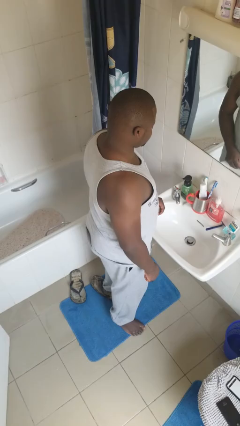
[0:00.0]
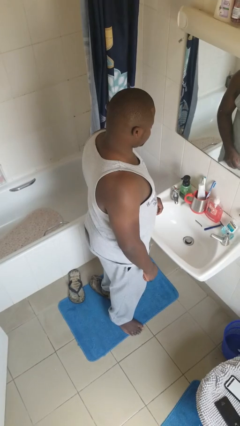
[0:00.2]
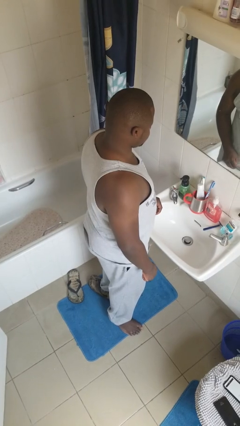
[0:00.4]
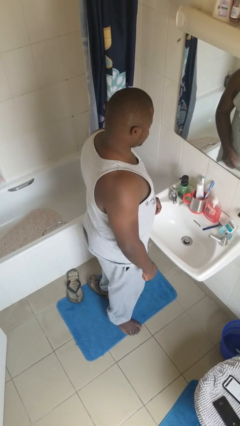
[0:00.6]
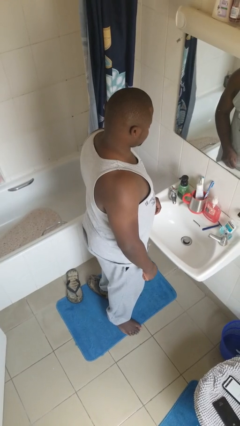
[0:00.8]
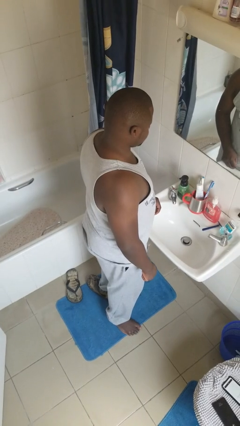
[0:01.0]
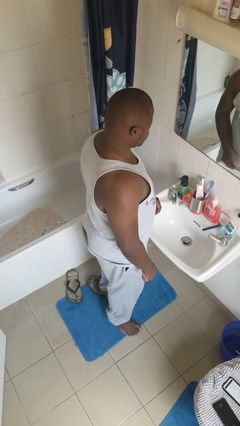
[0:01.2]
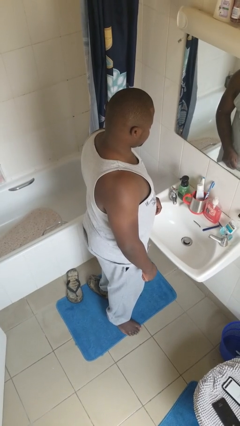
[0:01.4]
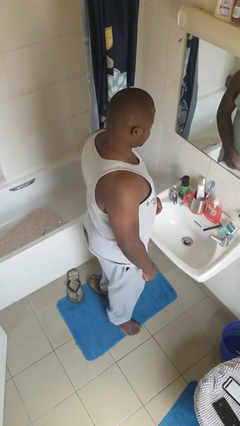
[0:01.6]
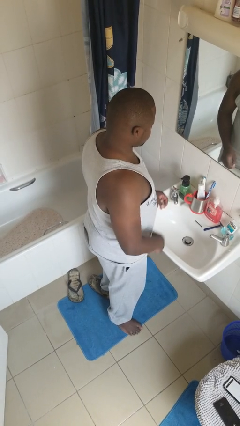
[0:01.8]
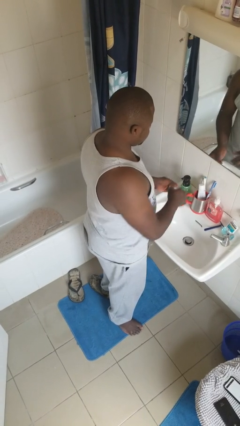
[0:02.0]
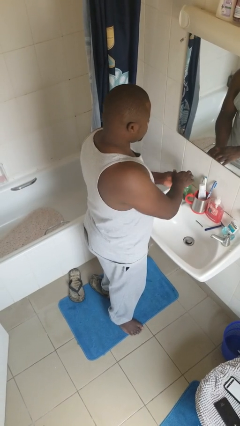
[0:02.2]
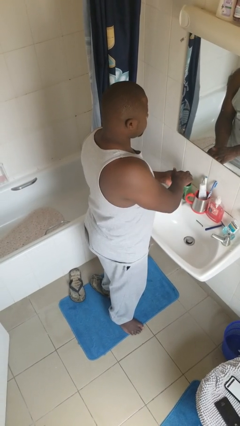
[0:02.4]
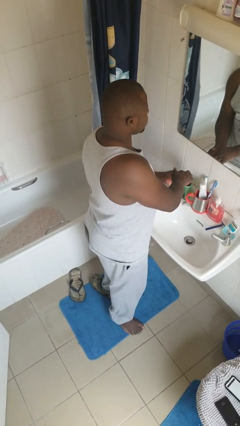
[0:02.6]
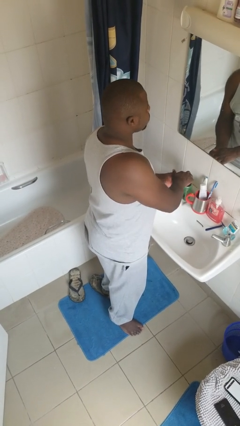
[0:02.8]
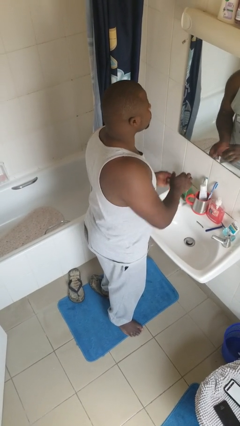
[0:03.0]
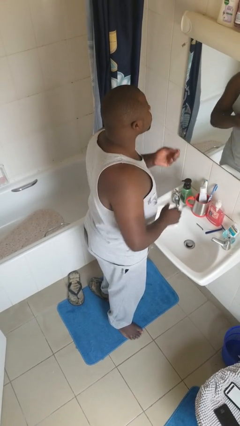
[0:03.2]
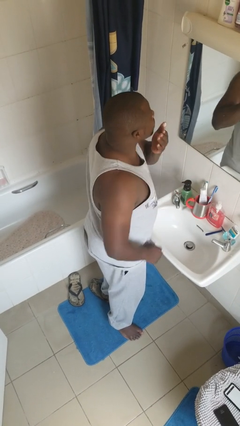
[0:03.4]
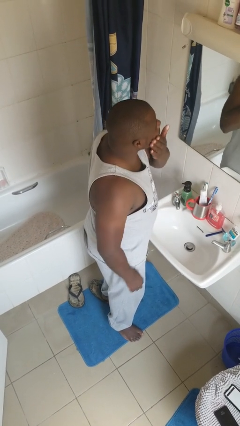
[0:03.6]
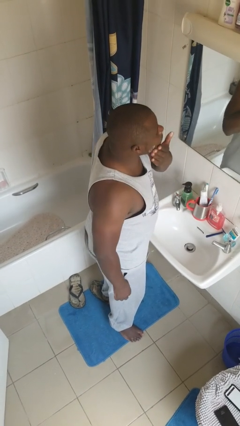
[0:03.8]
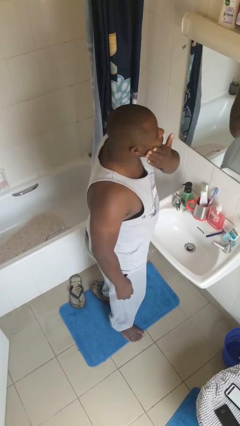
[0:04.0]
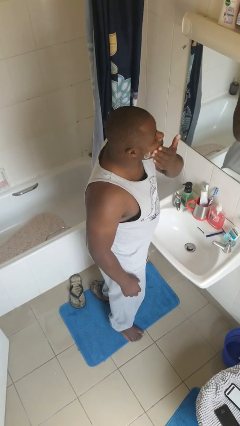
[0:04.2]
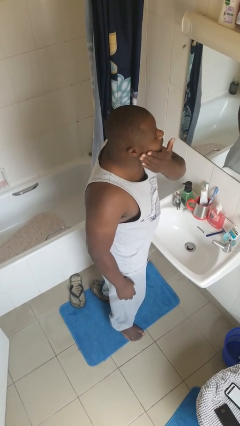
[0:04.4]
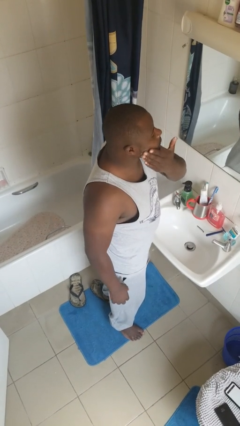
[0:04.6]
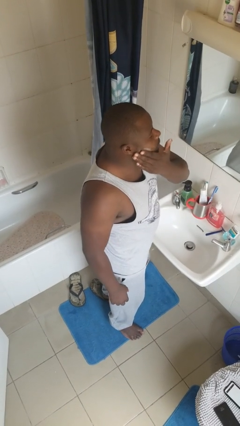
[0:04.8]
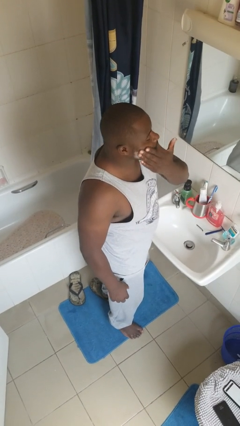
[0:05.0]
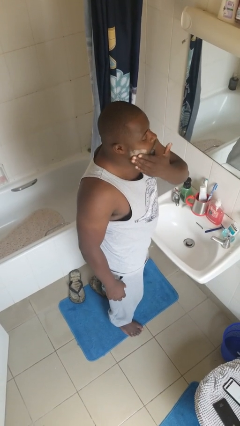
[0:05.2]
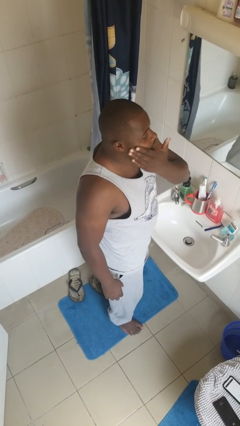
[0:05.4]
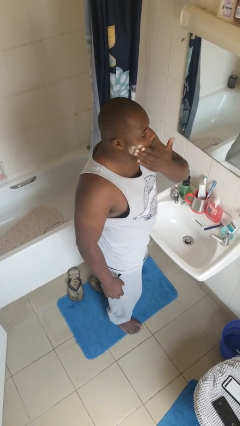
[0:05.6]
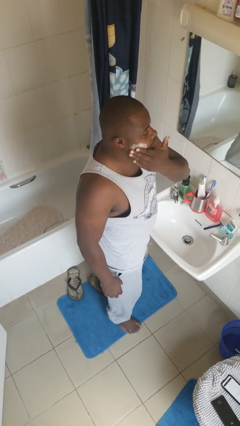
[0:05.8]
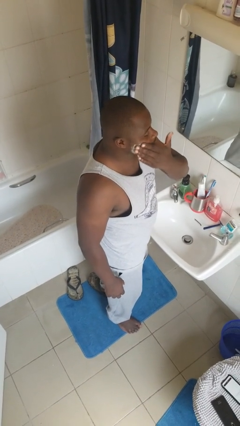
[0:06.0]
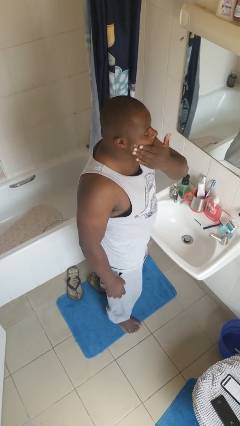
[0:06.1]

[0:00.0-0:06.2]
person applies shaving cream

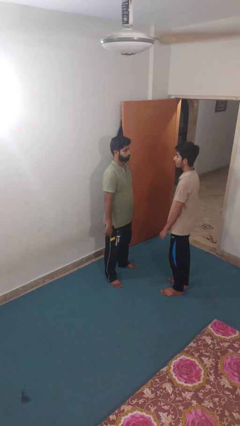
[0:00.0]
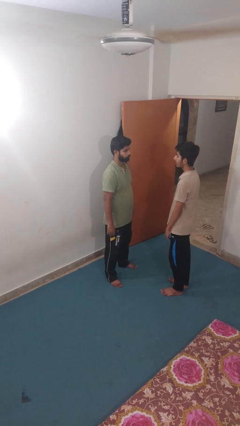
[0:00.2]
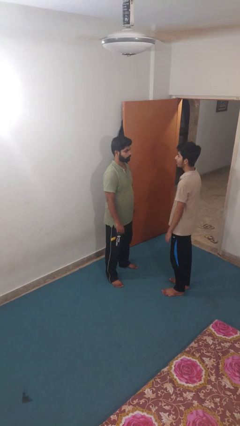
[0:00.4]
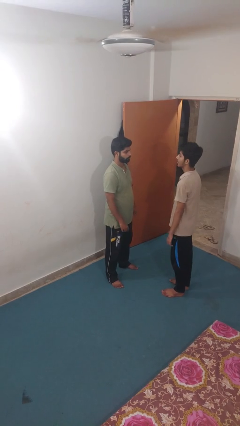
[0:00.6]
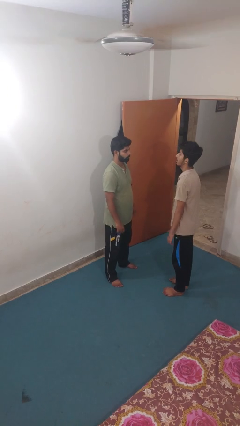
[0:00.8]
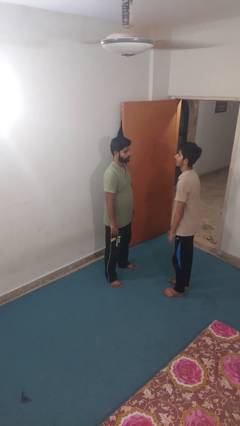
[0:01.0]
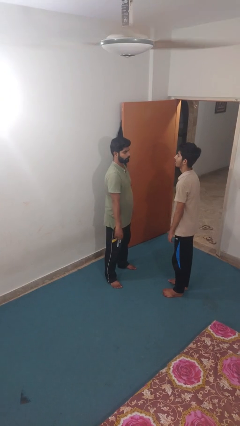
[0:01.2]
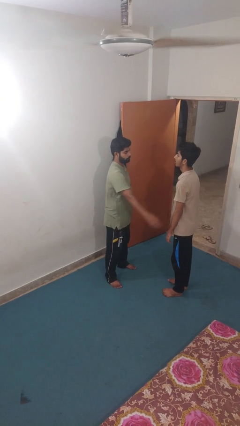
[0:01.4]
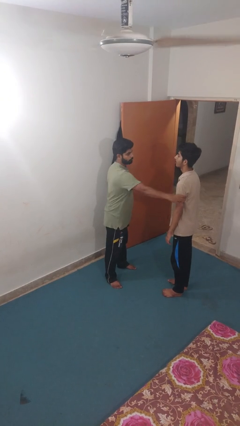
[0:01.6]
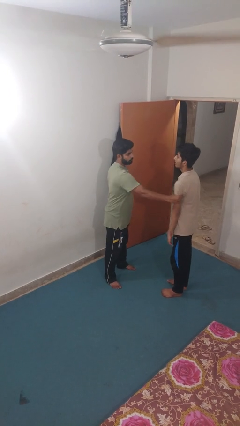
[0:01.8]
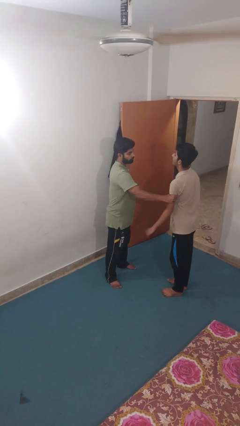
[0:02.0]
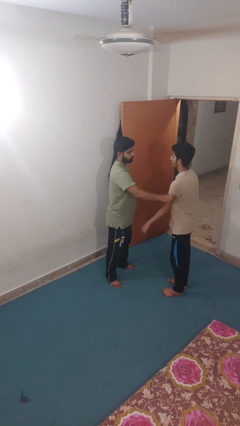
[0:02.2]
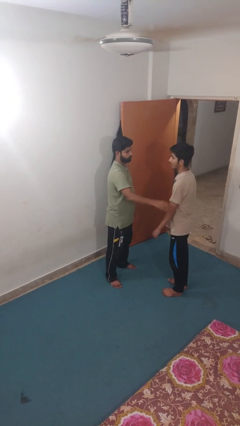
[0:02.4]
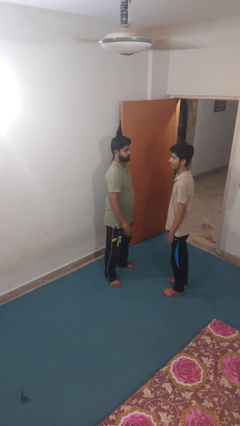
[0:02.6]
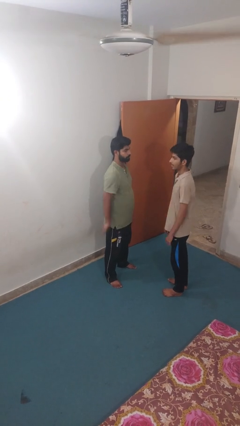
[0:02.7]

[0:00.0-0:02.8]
person grabs person by bicep

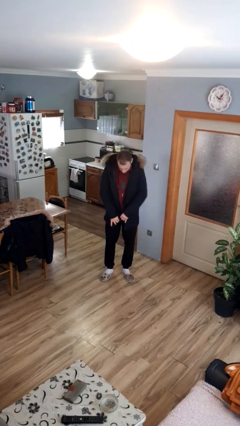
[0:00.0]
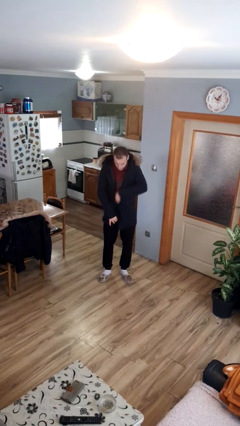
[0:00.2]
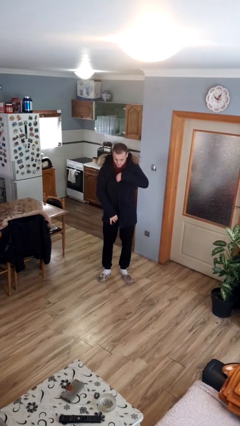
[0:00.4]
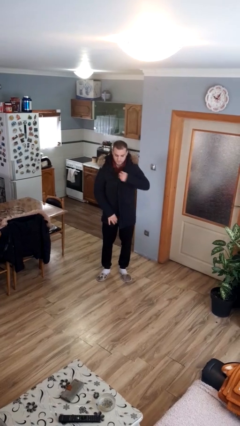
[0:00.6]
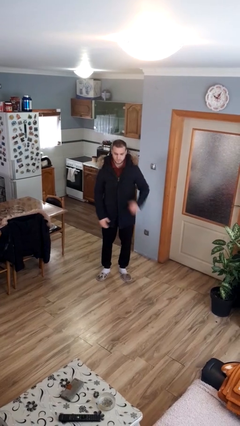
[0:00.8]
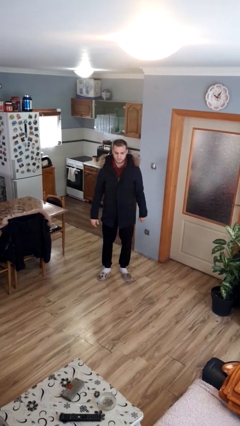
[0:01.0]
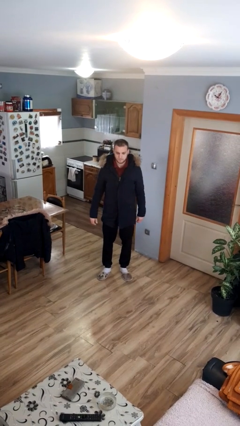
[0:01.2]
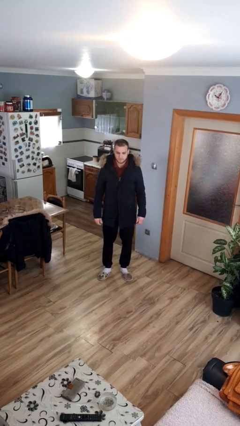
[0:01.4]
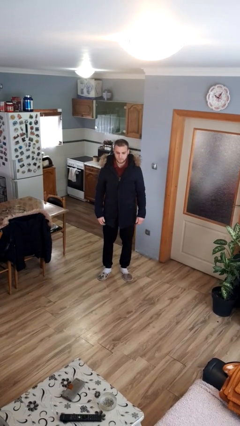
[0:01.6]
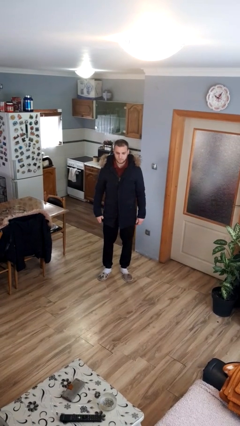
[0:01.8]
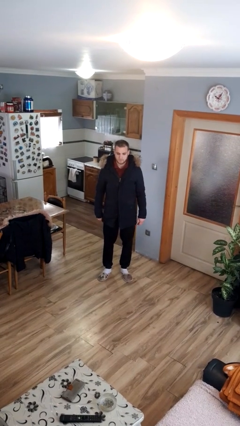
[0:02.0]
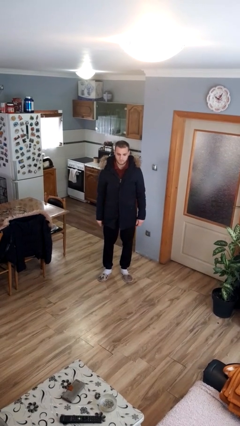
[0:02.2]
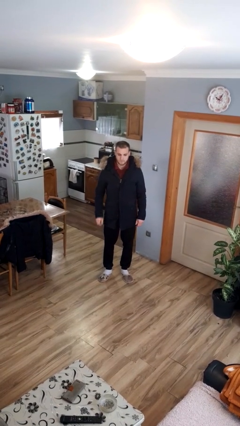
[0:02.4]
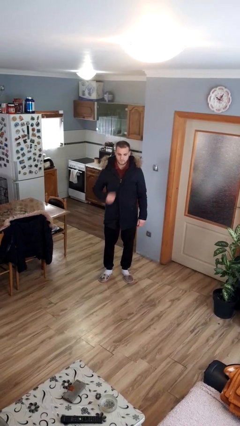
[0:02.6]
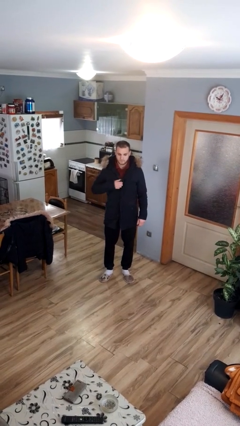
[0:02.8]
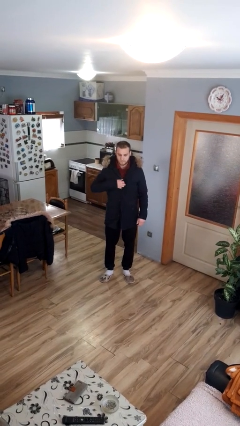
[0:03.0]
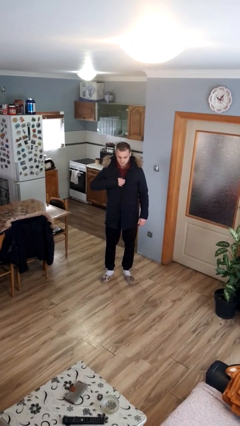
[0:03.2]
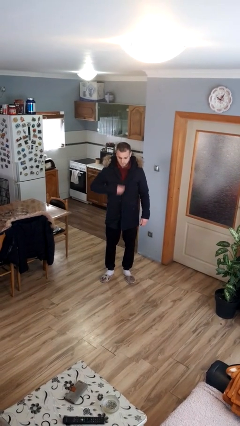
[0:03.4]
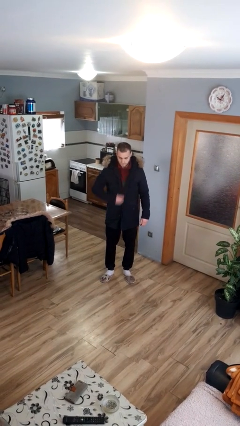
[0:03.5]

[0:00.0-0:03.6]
person zips up jacket

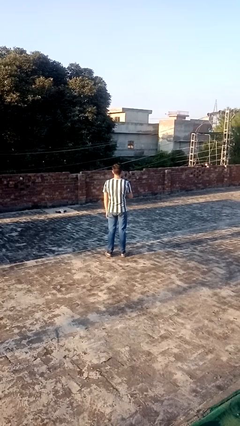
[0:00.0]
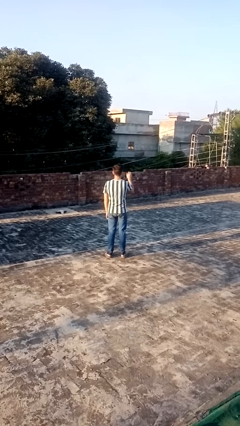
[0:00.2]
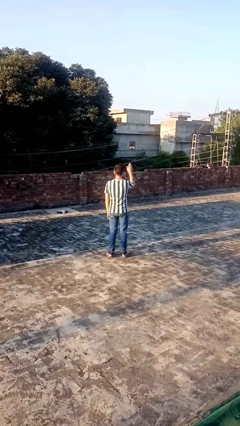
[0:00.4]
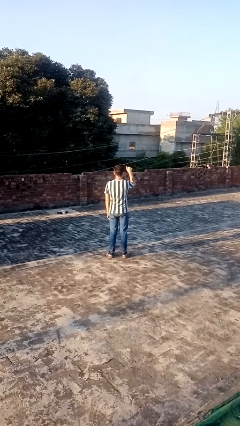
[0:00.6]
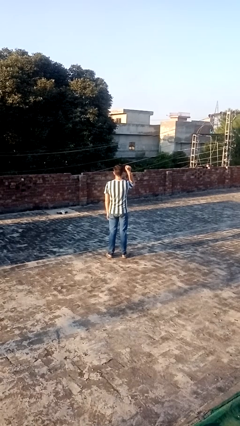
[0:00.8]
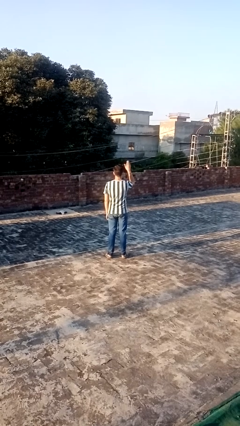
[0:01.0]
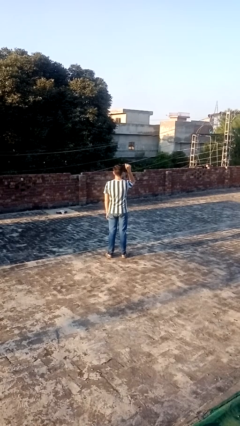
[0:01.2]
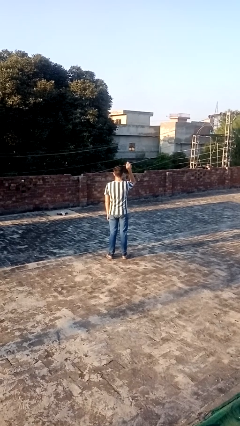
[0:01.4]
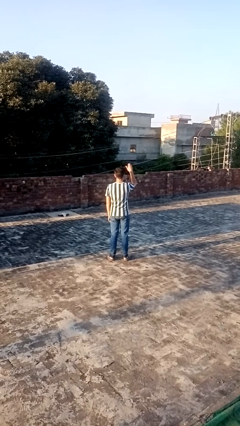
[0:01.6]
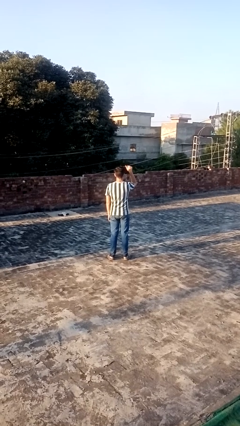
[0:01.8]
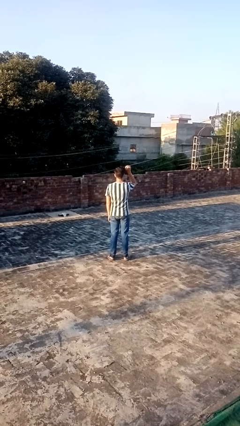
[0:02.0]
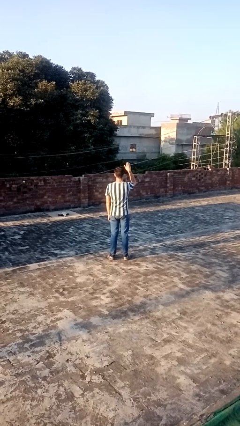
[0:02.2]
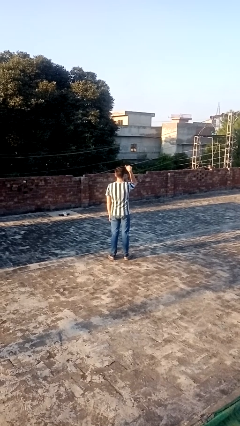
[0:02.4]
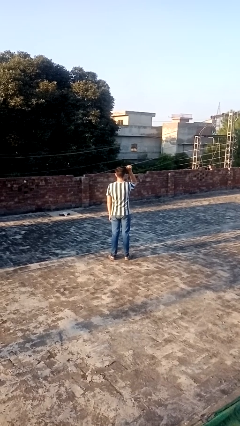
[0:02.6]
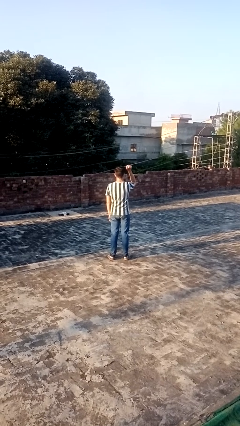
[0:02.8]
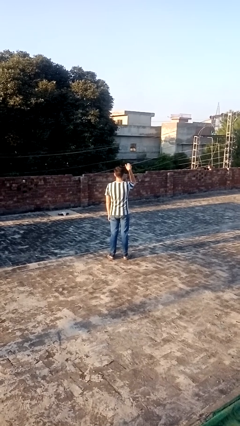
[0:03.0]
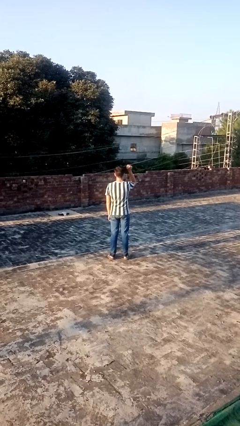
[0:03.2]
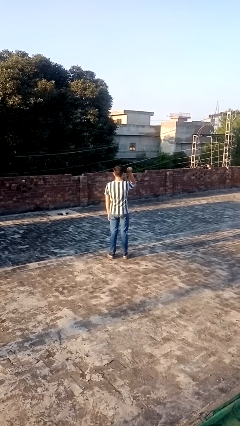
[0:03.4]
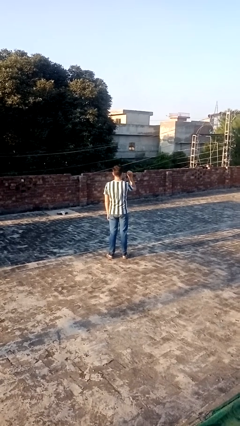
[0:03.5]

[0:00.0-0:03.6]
person gestures come here

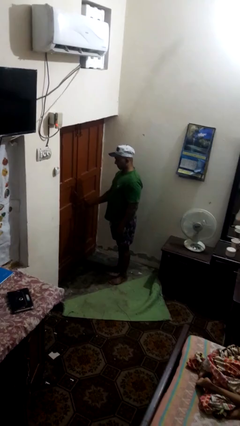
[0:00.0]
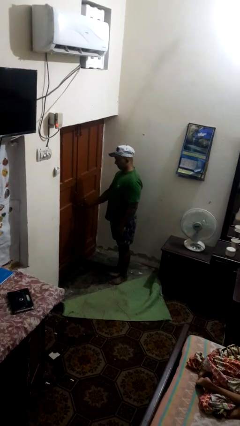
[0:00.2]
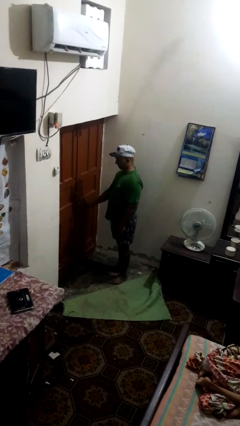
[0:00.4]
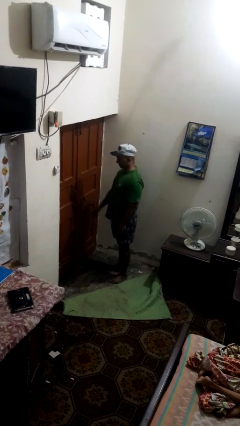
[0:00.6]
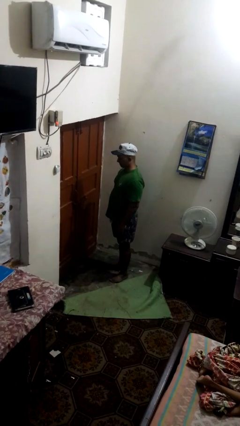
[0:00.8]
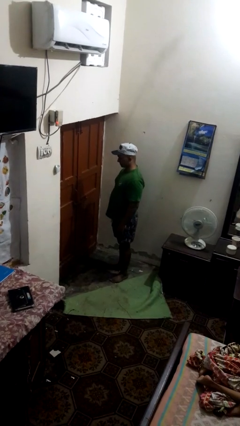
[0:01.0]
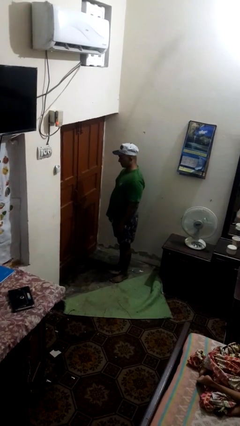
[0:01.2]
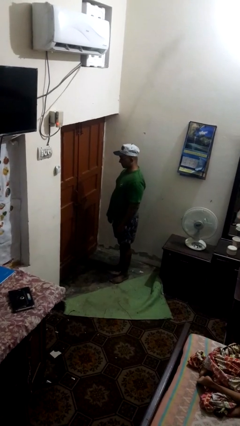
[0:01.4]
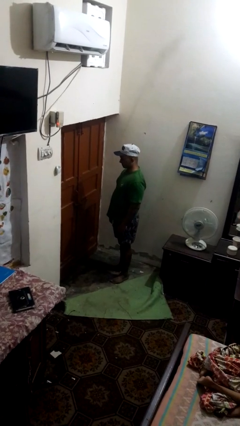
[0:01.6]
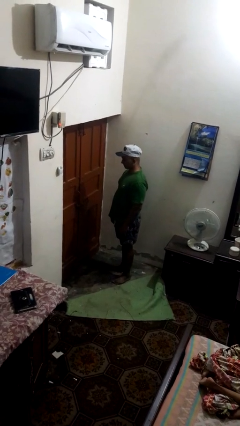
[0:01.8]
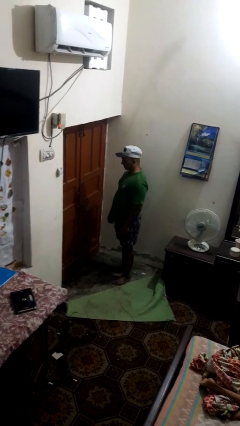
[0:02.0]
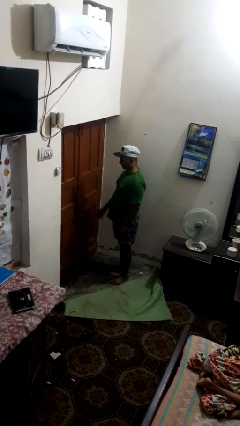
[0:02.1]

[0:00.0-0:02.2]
person locks door with keys
